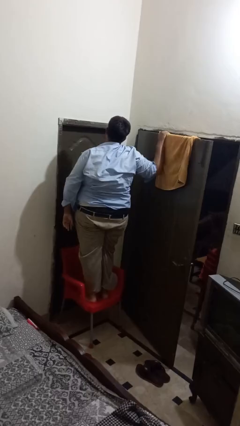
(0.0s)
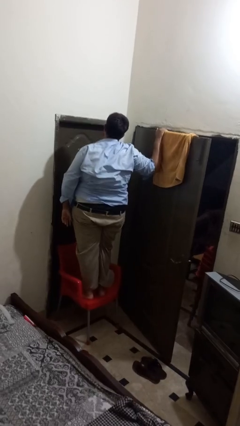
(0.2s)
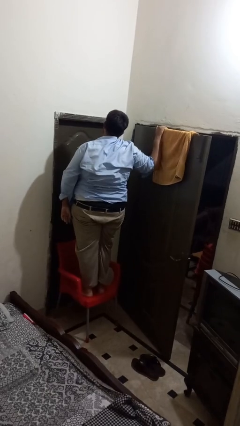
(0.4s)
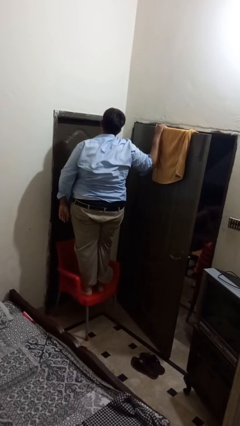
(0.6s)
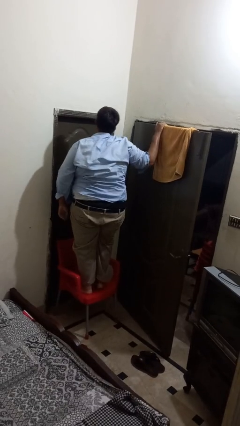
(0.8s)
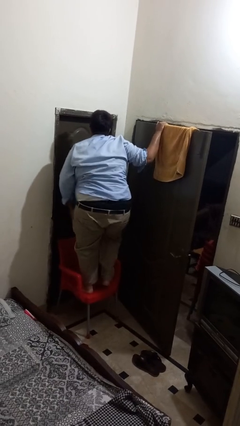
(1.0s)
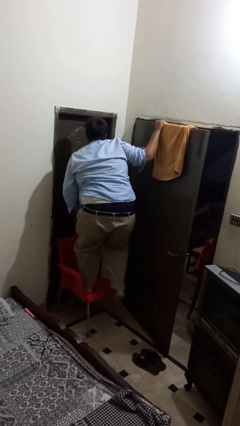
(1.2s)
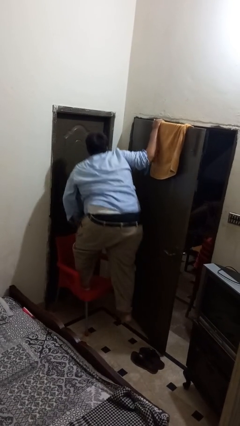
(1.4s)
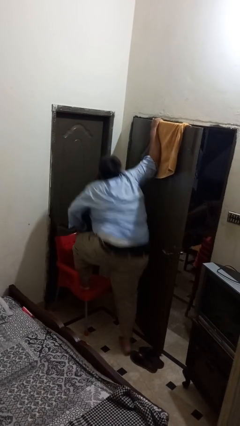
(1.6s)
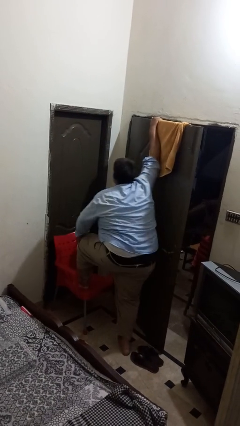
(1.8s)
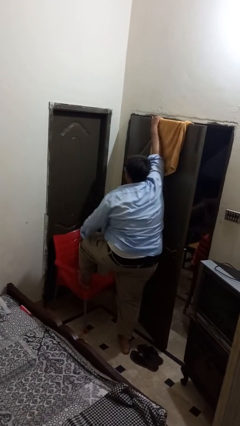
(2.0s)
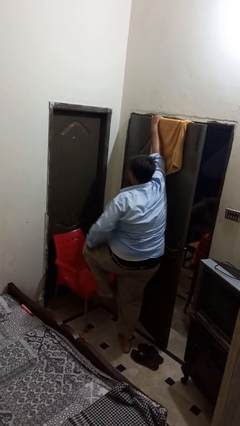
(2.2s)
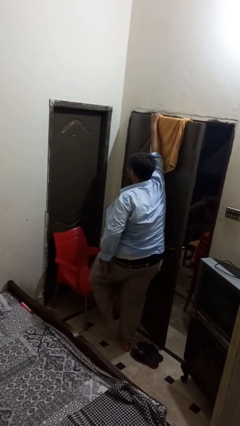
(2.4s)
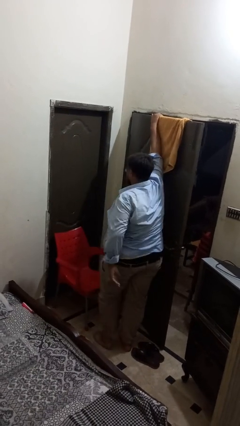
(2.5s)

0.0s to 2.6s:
person climbs off chair

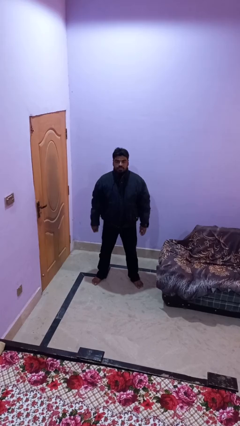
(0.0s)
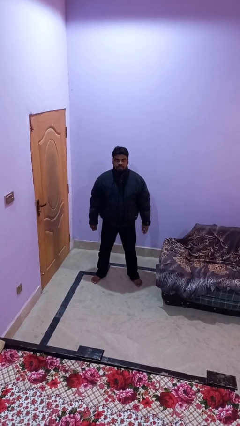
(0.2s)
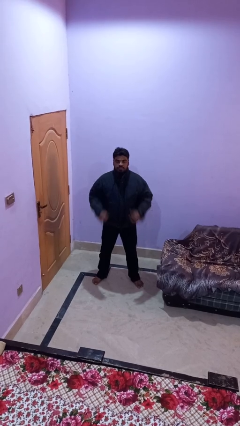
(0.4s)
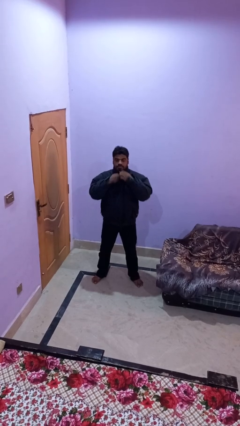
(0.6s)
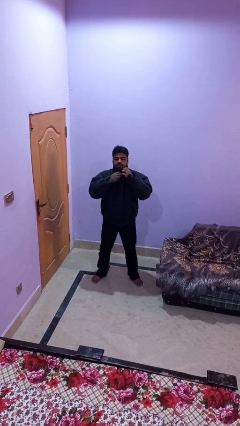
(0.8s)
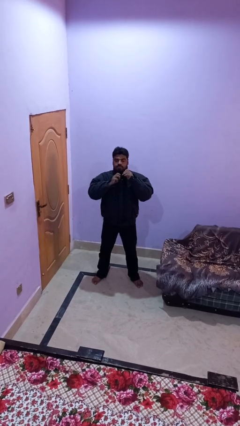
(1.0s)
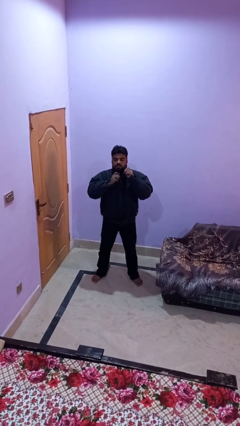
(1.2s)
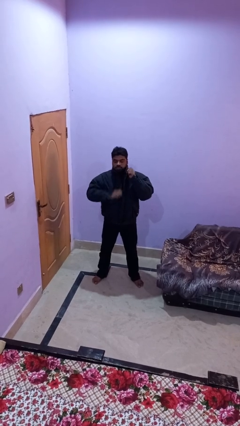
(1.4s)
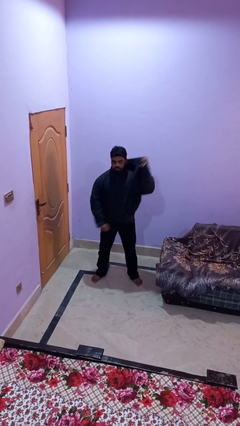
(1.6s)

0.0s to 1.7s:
person unzips jacket

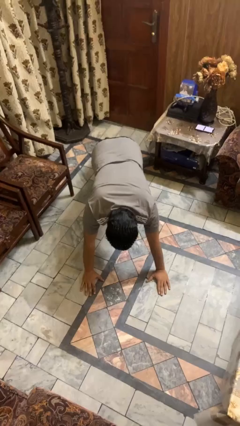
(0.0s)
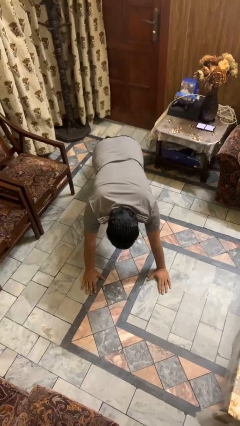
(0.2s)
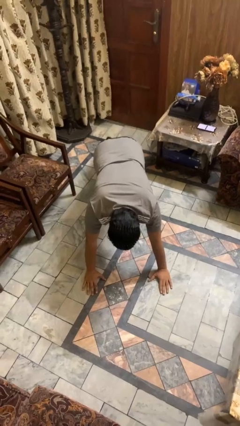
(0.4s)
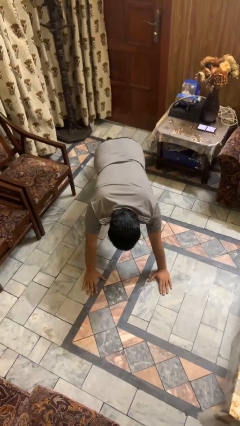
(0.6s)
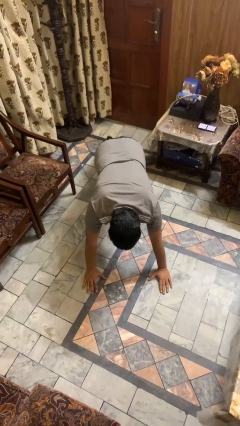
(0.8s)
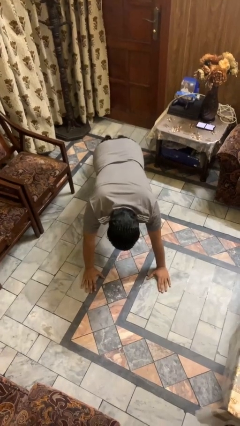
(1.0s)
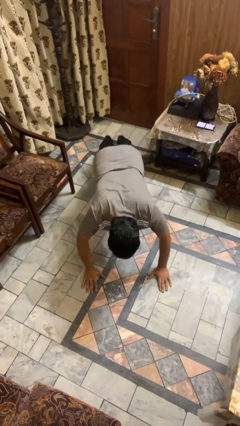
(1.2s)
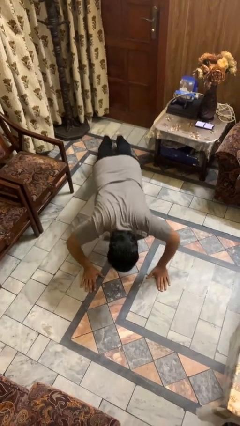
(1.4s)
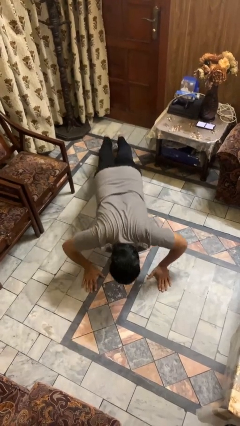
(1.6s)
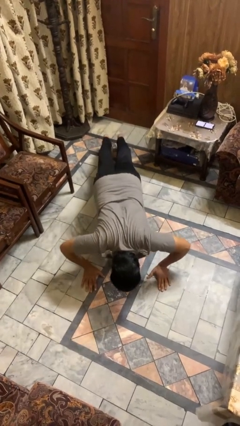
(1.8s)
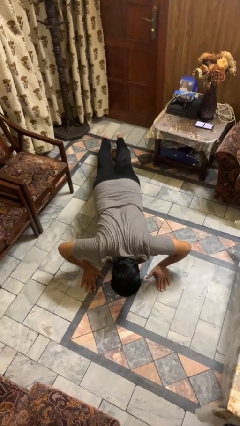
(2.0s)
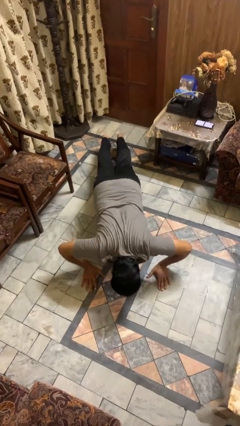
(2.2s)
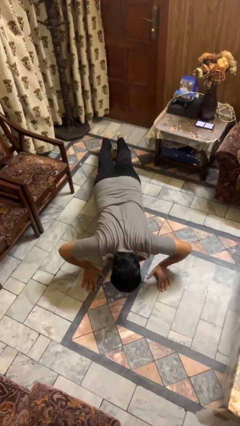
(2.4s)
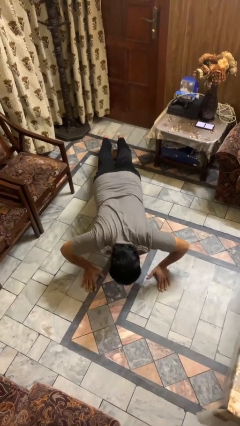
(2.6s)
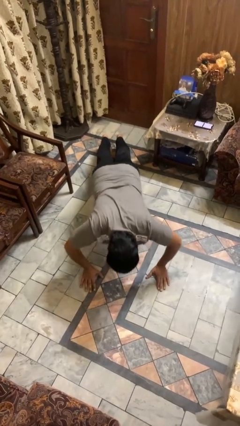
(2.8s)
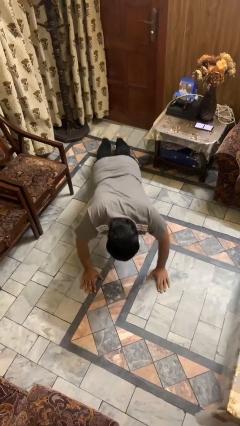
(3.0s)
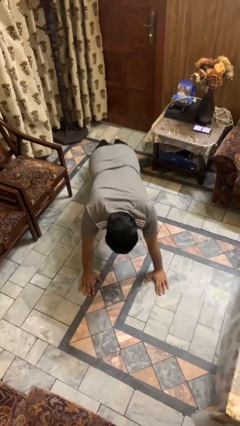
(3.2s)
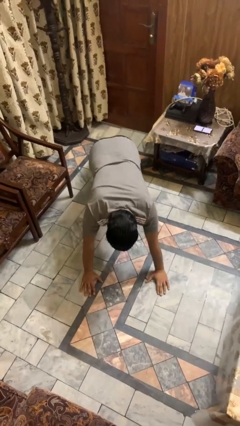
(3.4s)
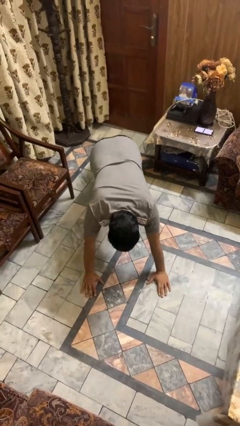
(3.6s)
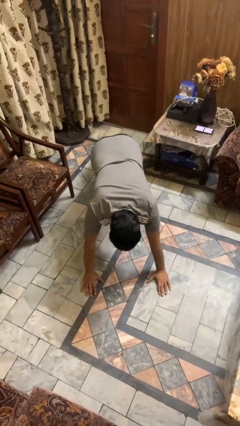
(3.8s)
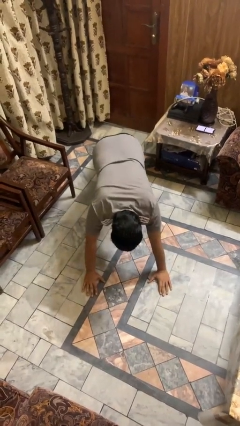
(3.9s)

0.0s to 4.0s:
person exercises with pushup

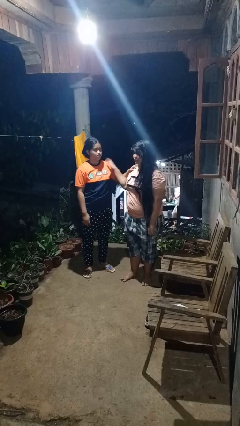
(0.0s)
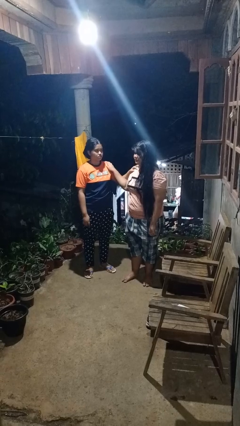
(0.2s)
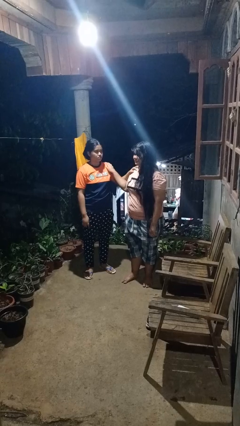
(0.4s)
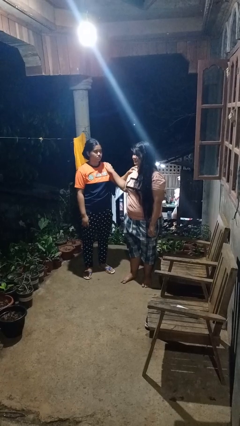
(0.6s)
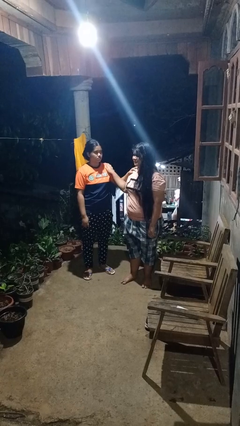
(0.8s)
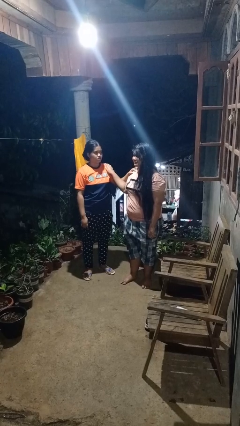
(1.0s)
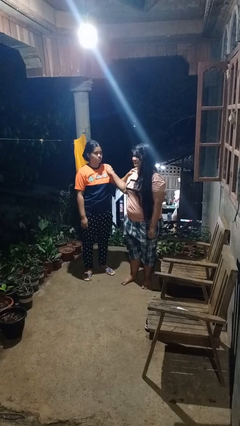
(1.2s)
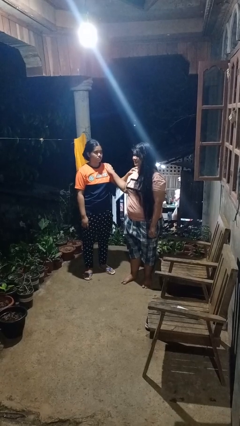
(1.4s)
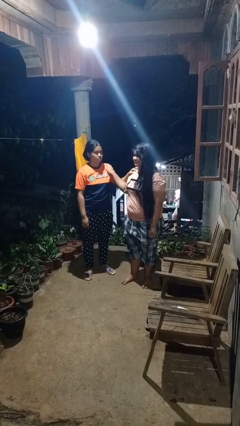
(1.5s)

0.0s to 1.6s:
person grabs person by shoulder

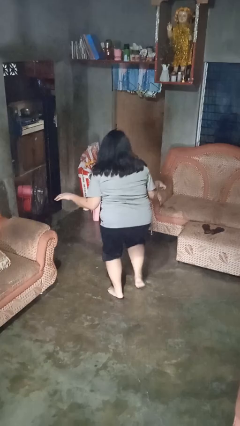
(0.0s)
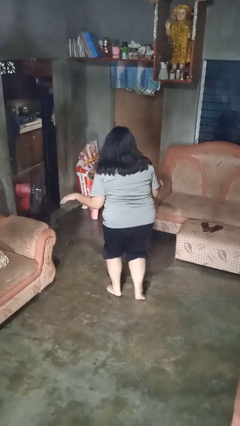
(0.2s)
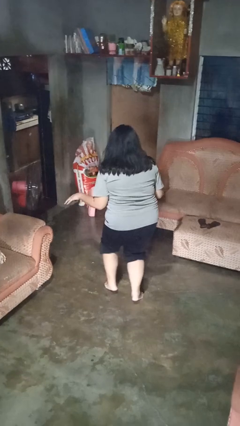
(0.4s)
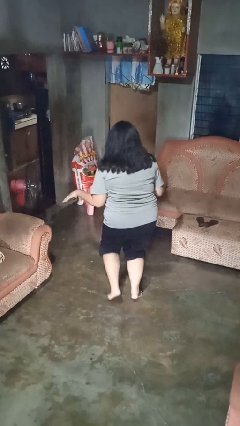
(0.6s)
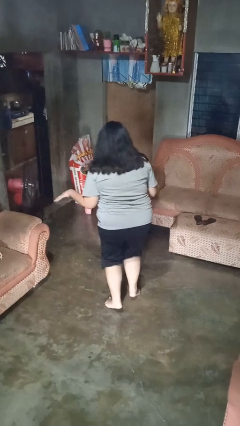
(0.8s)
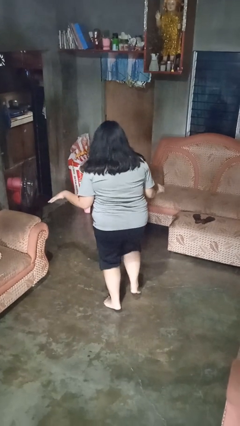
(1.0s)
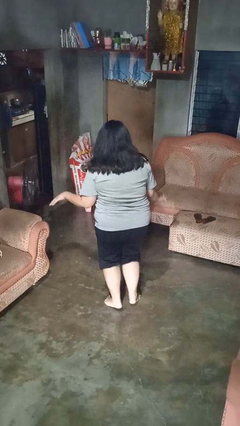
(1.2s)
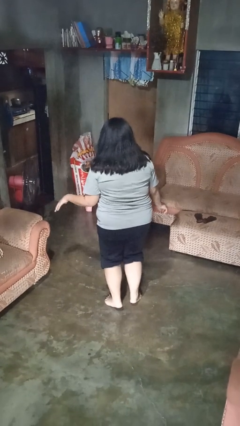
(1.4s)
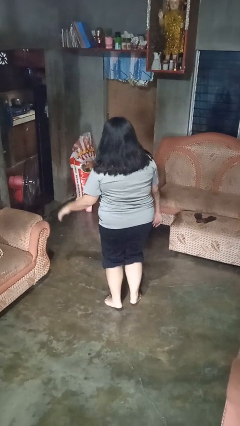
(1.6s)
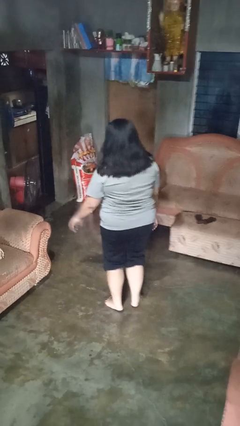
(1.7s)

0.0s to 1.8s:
person walks tiptoe

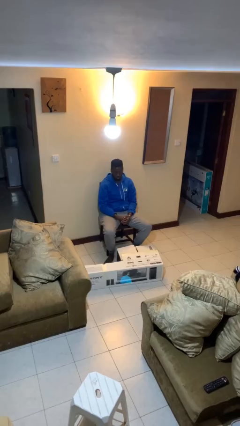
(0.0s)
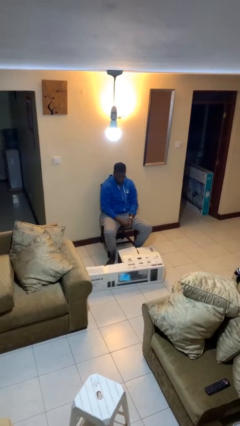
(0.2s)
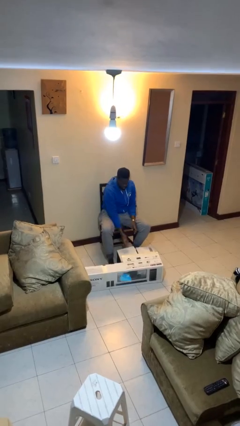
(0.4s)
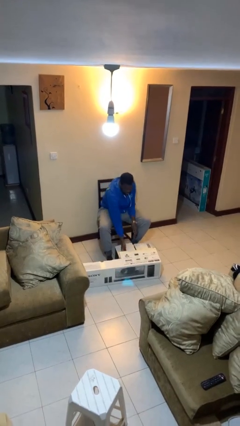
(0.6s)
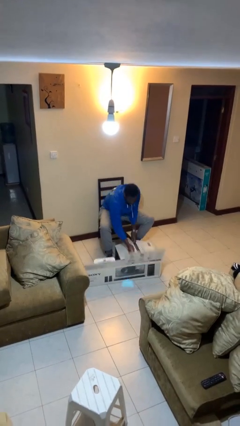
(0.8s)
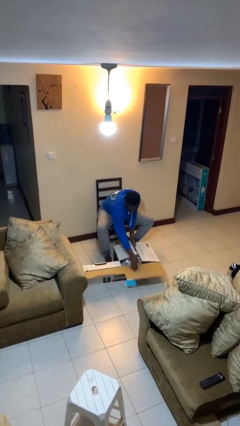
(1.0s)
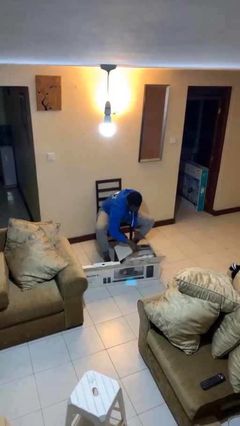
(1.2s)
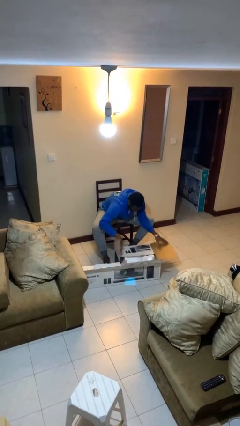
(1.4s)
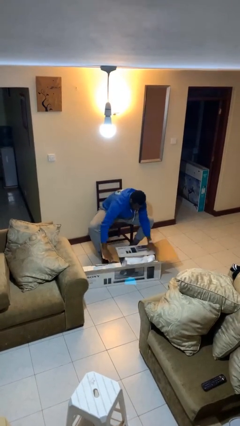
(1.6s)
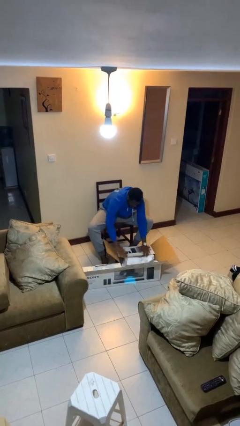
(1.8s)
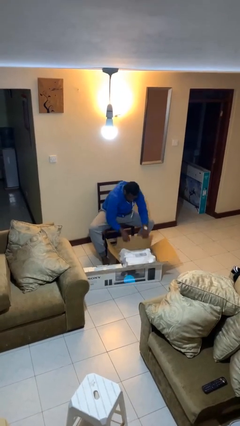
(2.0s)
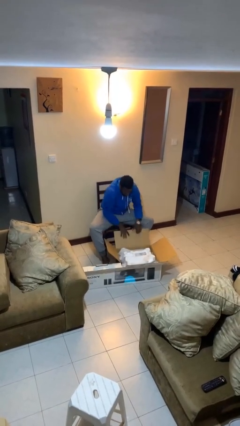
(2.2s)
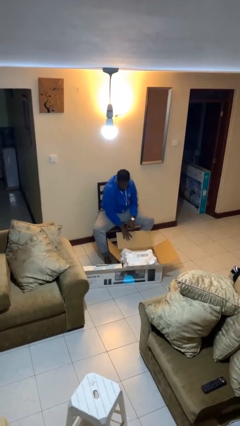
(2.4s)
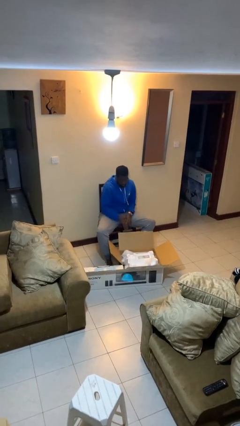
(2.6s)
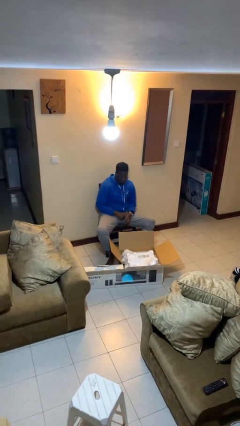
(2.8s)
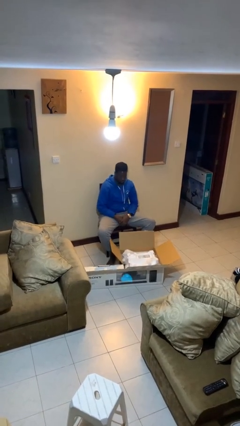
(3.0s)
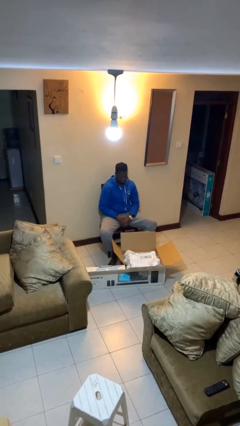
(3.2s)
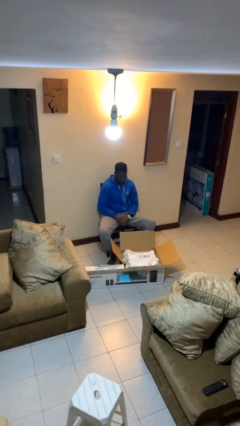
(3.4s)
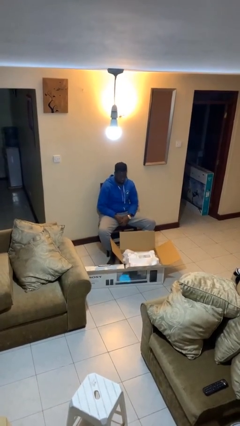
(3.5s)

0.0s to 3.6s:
person opens box

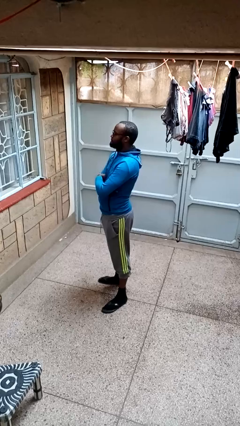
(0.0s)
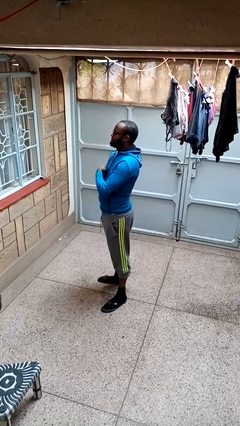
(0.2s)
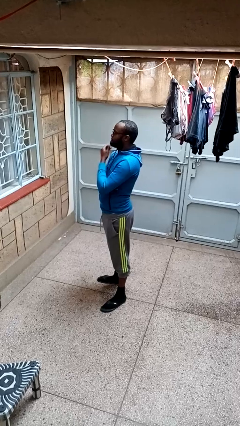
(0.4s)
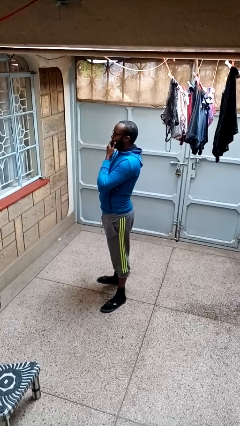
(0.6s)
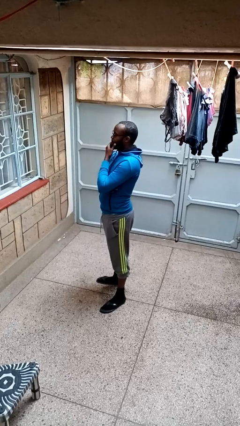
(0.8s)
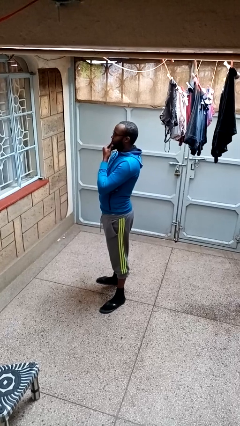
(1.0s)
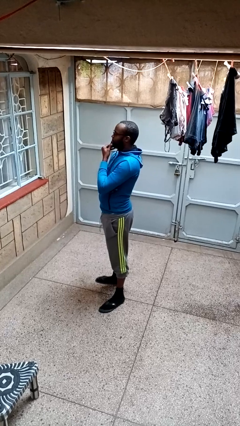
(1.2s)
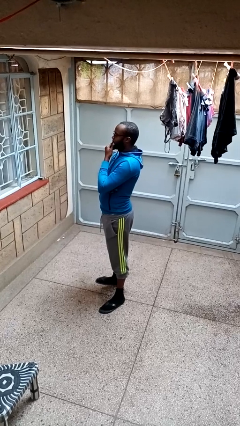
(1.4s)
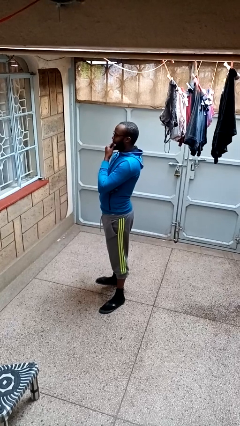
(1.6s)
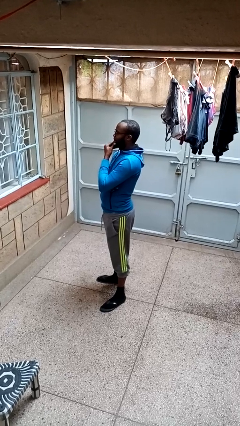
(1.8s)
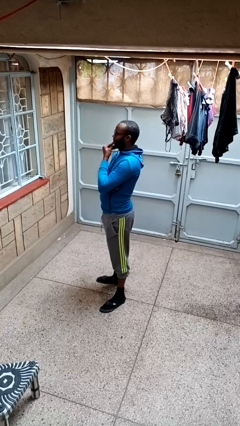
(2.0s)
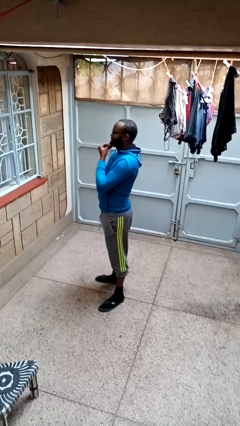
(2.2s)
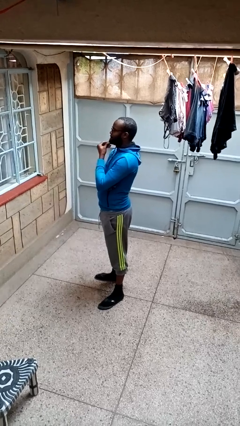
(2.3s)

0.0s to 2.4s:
person strokes chin
